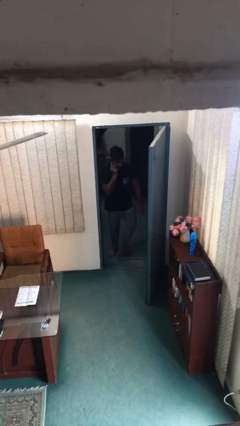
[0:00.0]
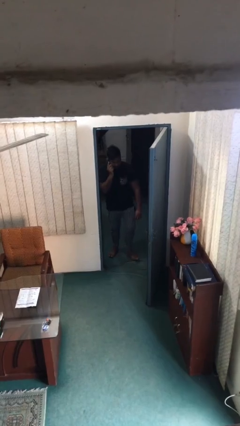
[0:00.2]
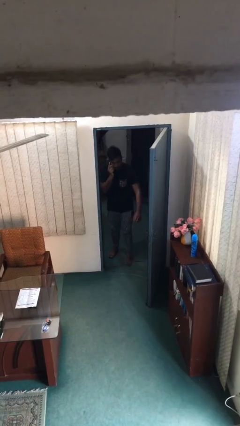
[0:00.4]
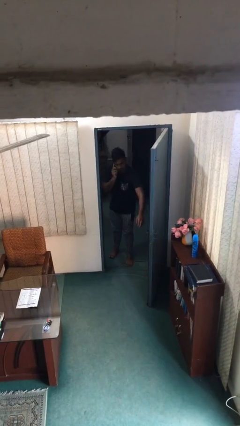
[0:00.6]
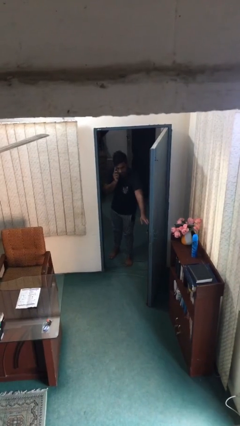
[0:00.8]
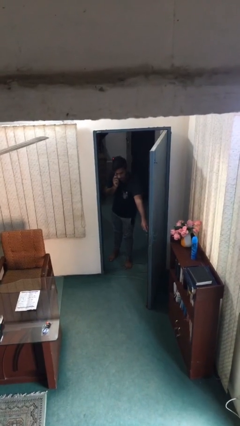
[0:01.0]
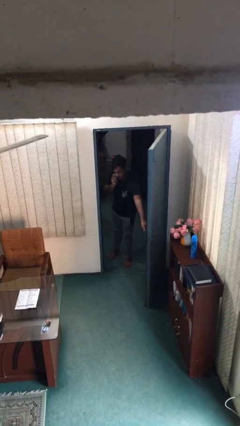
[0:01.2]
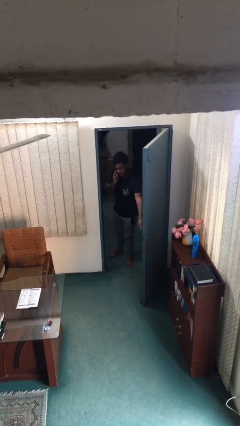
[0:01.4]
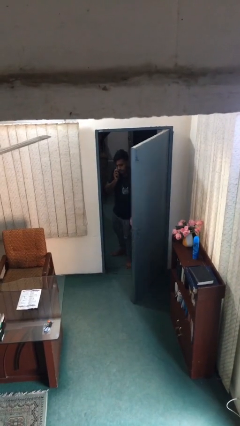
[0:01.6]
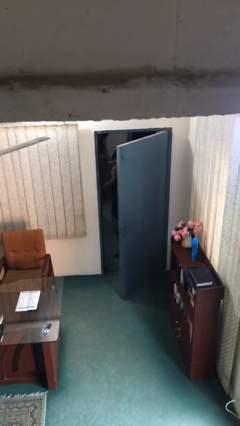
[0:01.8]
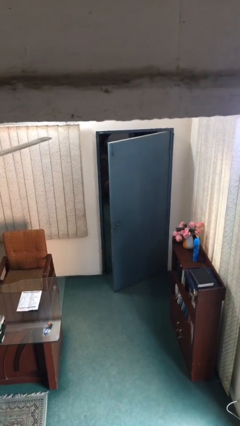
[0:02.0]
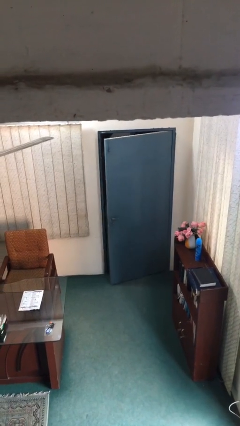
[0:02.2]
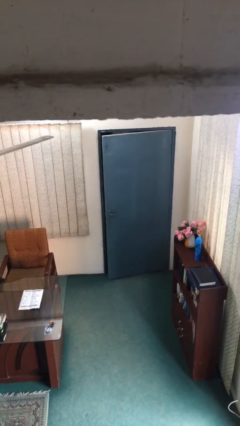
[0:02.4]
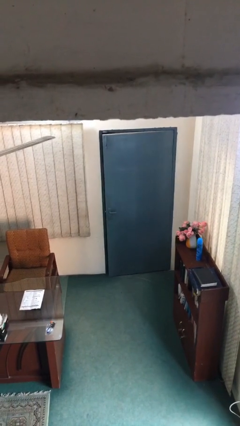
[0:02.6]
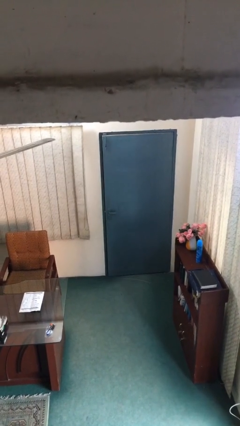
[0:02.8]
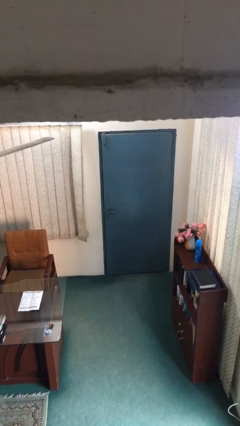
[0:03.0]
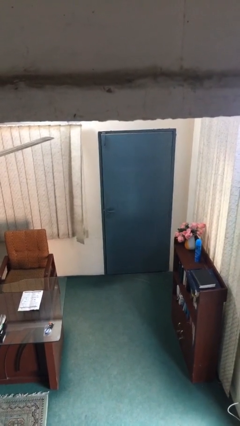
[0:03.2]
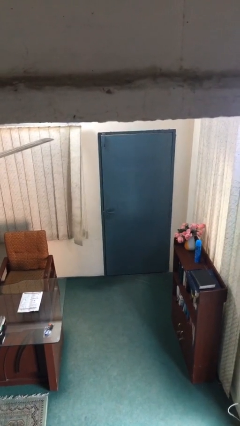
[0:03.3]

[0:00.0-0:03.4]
person closes facility door

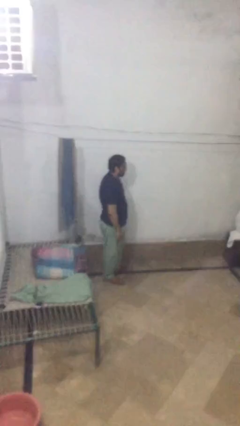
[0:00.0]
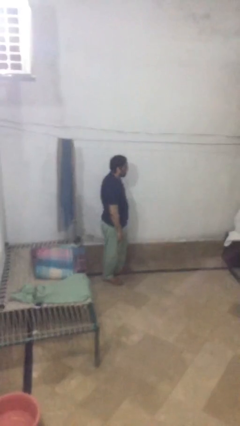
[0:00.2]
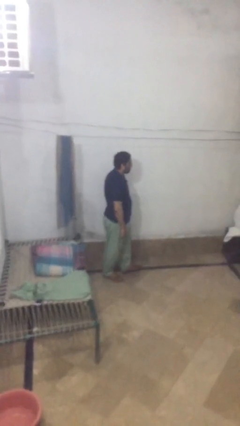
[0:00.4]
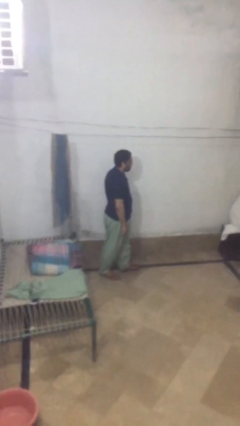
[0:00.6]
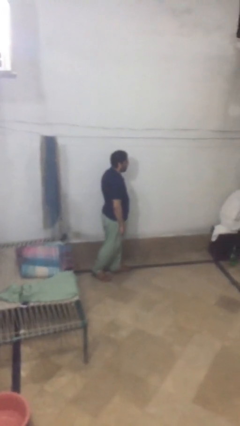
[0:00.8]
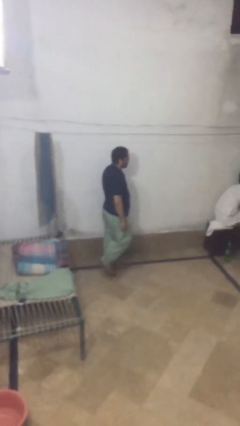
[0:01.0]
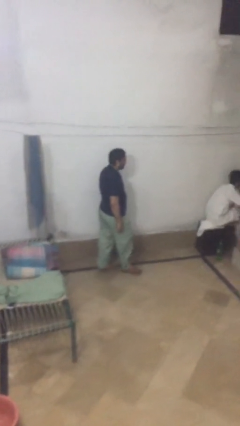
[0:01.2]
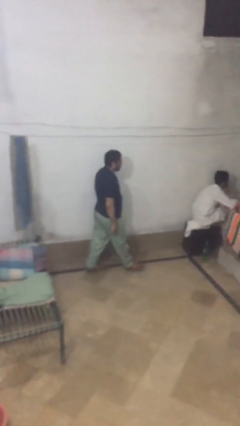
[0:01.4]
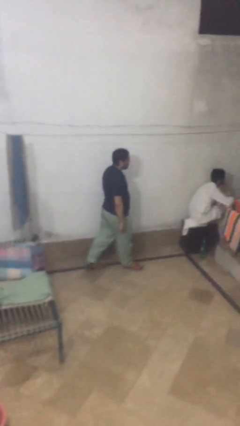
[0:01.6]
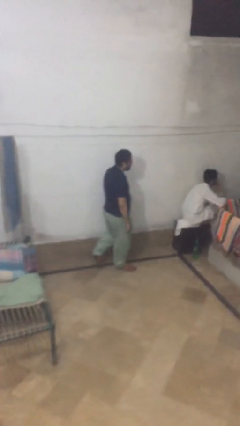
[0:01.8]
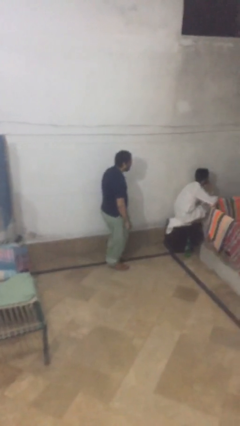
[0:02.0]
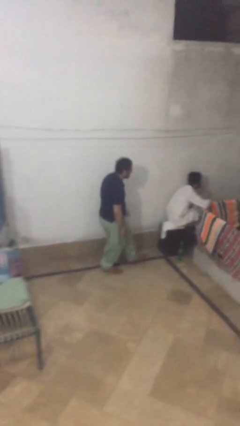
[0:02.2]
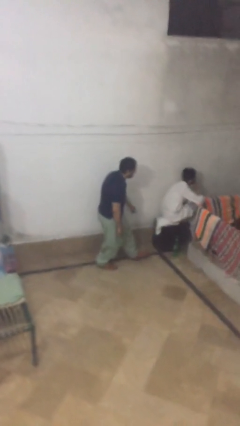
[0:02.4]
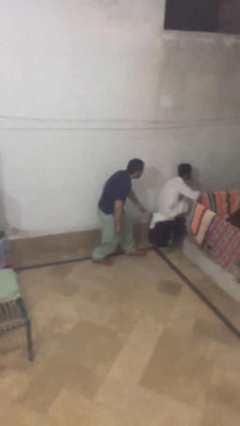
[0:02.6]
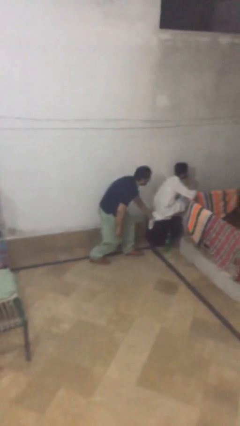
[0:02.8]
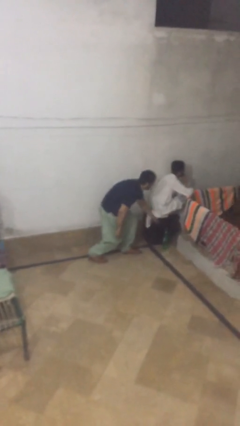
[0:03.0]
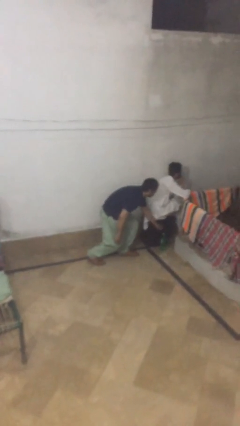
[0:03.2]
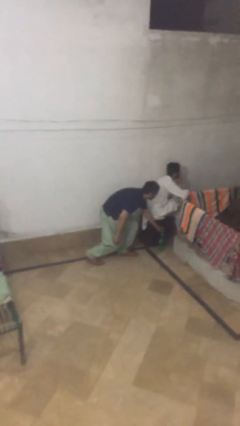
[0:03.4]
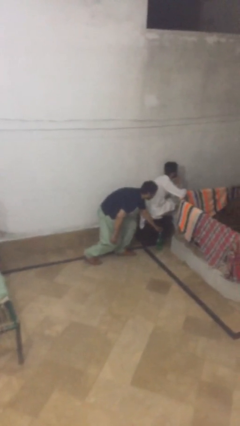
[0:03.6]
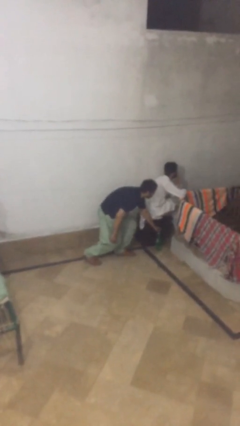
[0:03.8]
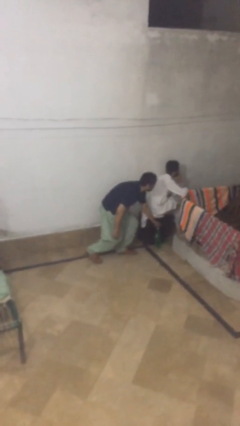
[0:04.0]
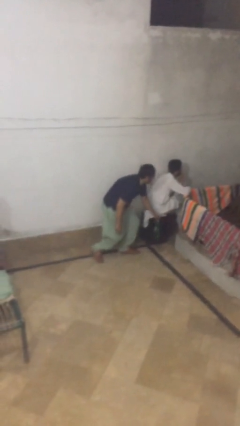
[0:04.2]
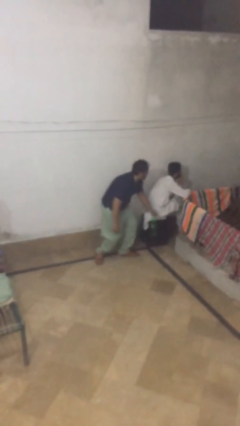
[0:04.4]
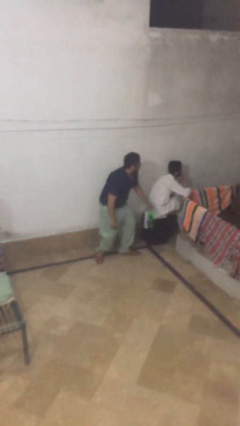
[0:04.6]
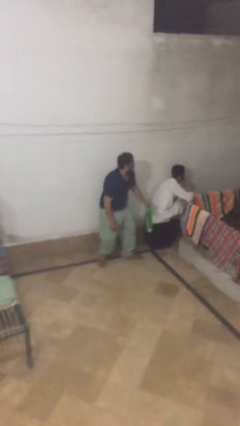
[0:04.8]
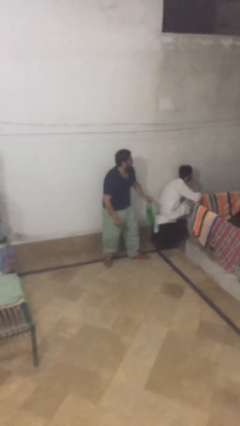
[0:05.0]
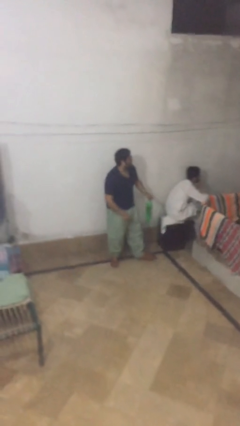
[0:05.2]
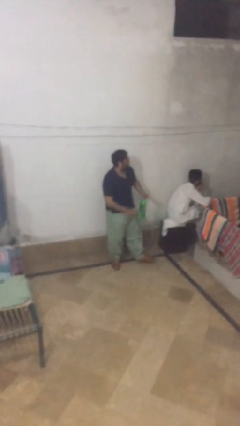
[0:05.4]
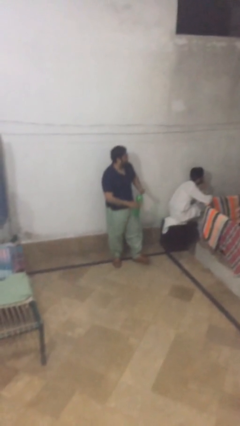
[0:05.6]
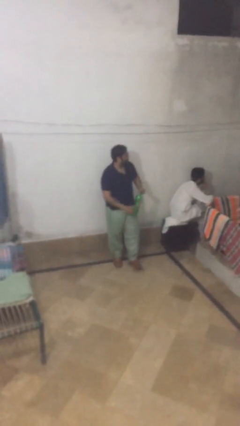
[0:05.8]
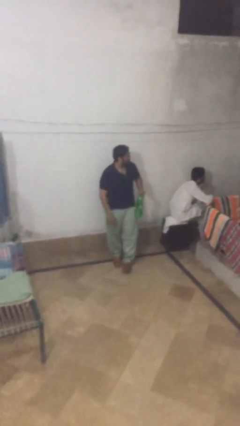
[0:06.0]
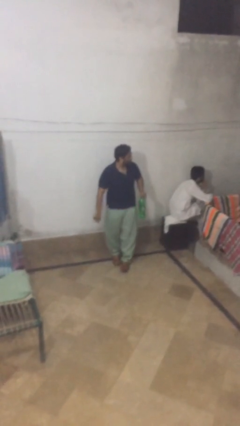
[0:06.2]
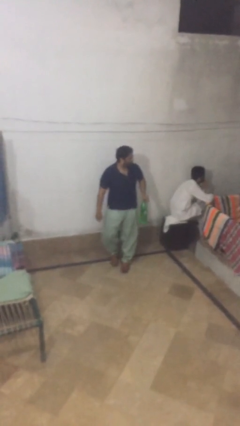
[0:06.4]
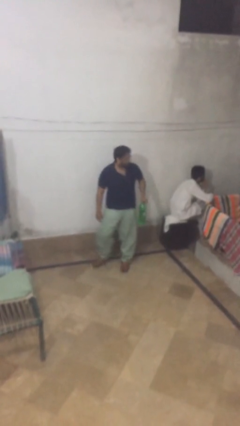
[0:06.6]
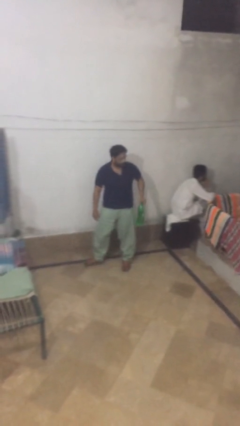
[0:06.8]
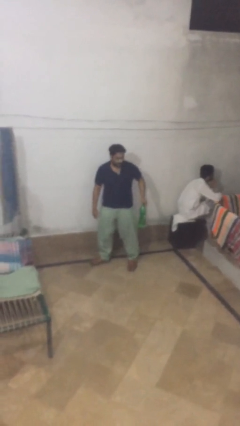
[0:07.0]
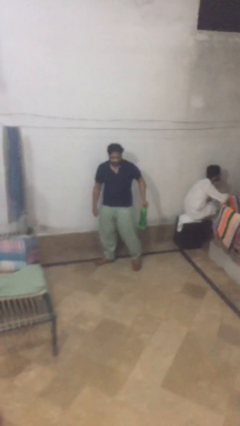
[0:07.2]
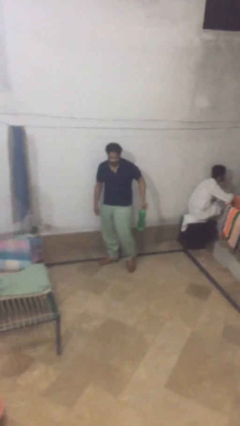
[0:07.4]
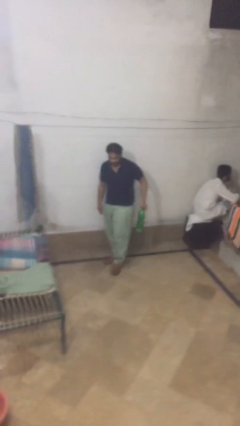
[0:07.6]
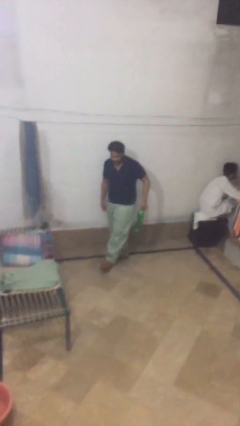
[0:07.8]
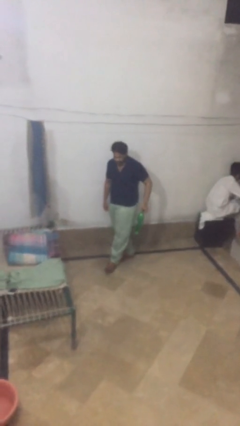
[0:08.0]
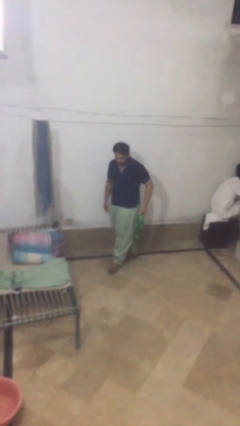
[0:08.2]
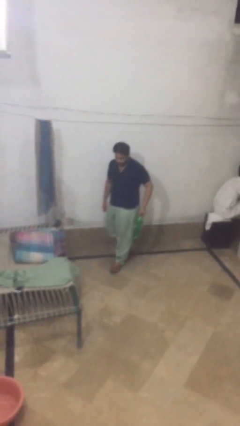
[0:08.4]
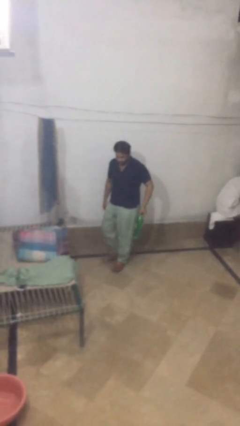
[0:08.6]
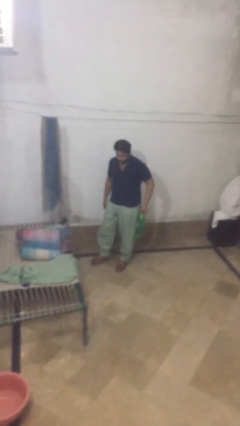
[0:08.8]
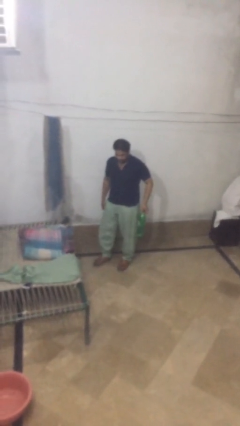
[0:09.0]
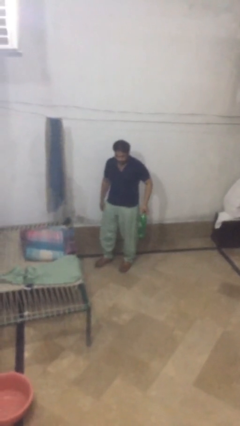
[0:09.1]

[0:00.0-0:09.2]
person steals object from person

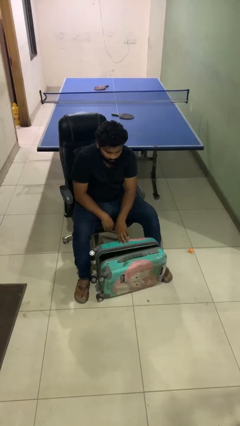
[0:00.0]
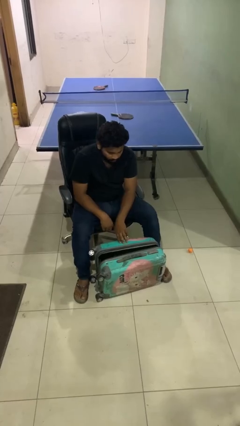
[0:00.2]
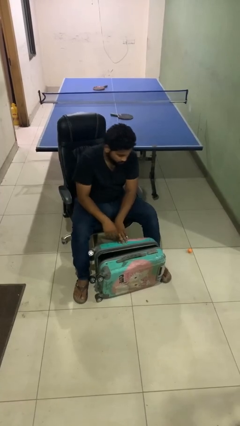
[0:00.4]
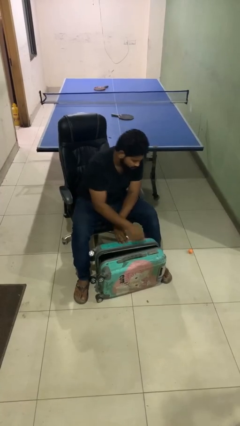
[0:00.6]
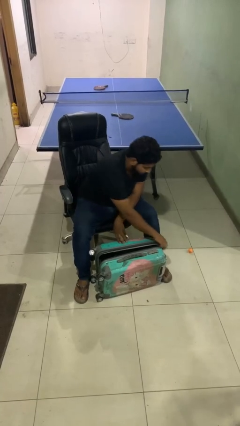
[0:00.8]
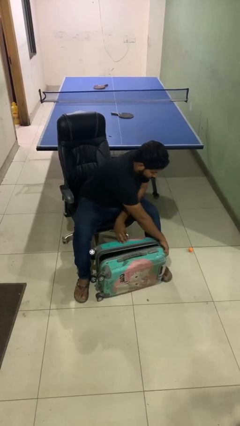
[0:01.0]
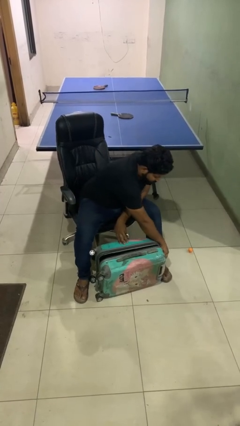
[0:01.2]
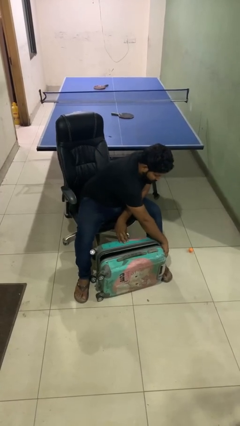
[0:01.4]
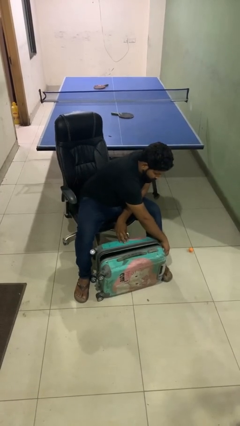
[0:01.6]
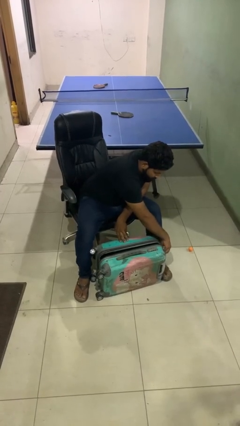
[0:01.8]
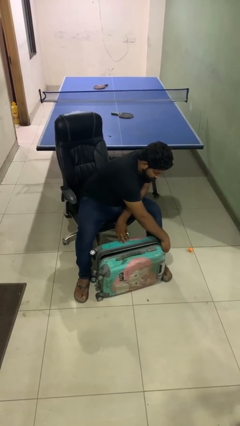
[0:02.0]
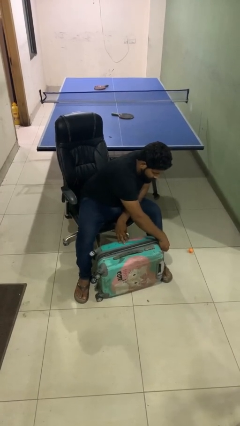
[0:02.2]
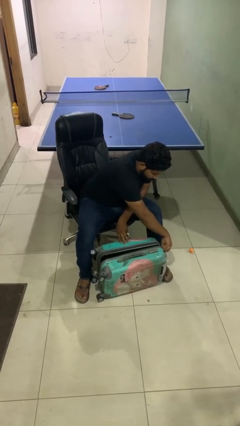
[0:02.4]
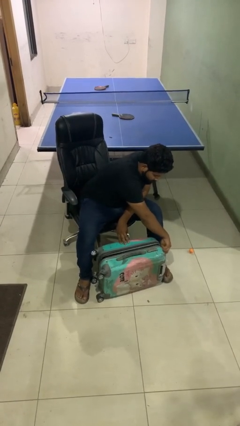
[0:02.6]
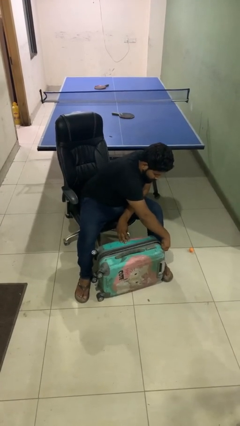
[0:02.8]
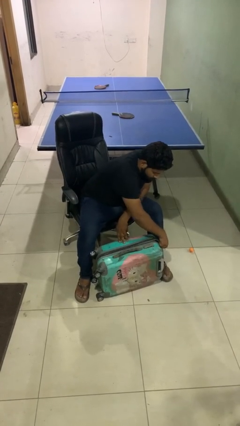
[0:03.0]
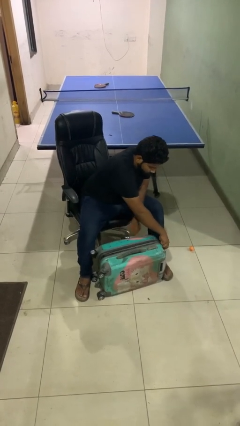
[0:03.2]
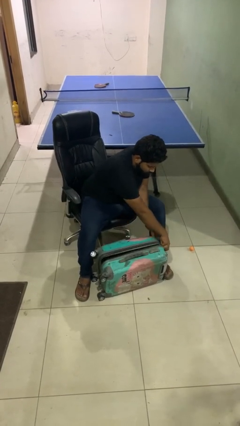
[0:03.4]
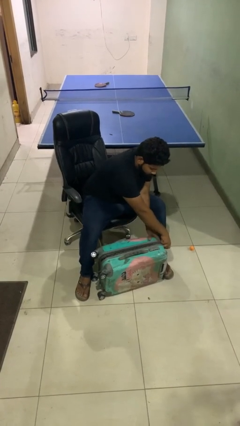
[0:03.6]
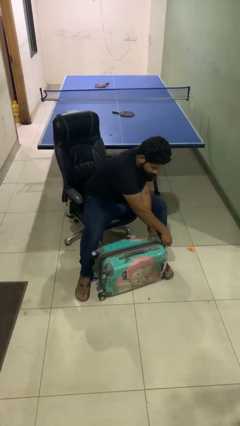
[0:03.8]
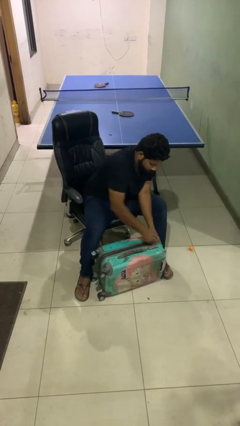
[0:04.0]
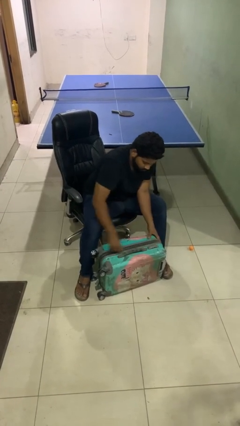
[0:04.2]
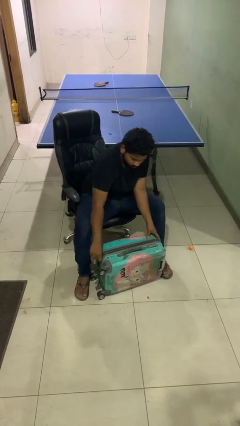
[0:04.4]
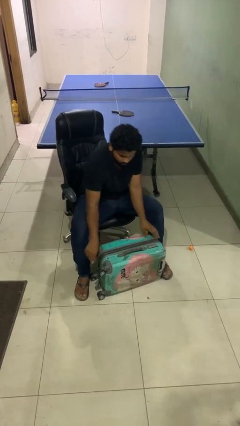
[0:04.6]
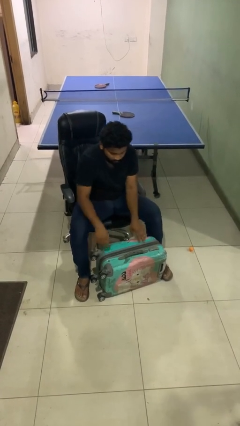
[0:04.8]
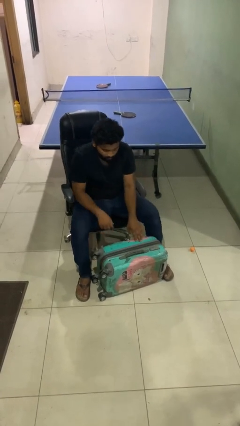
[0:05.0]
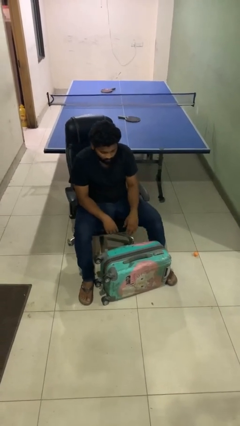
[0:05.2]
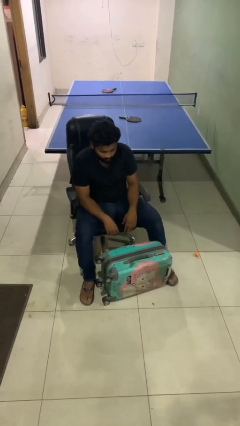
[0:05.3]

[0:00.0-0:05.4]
person closes suitcase
